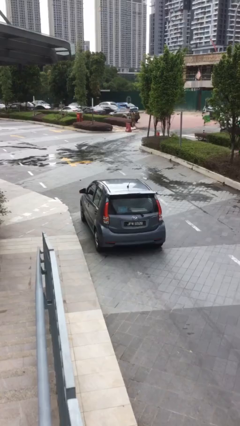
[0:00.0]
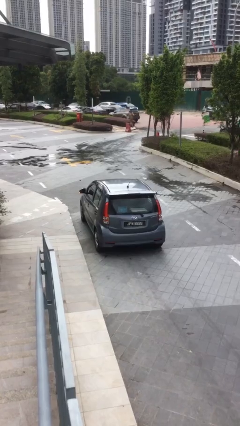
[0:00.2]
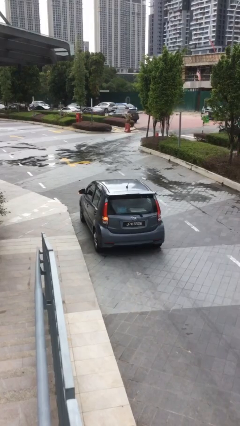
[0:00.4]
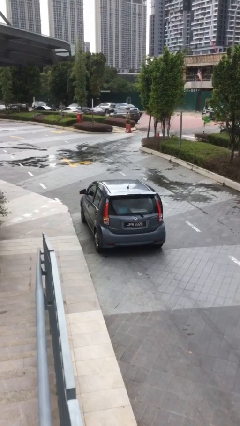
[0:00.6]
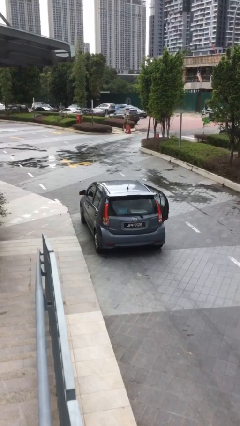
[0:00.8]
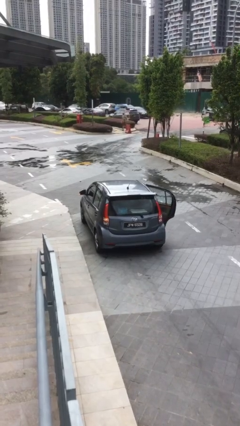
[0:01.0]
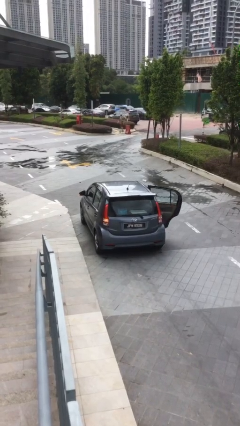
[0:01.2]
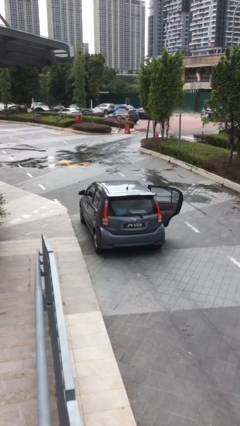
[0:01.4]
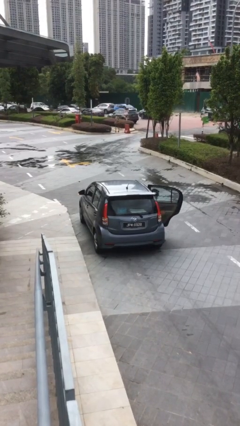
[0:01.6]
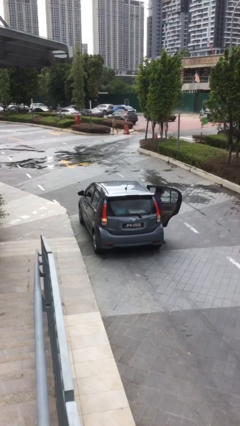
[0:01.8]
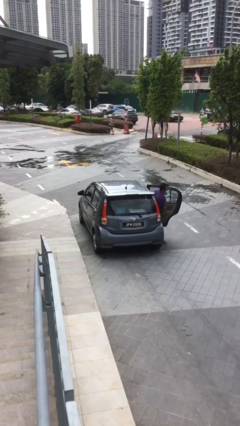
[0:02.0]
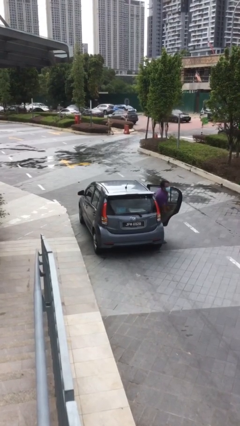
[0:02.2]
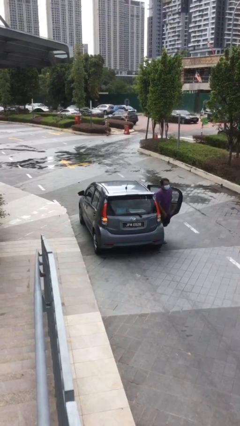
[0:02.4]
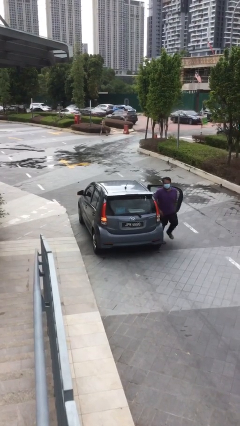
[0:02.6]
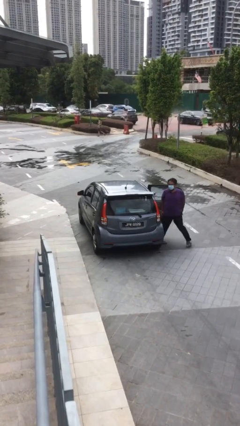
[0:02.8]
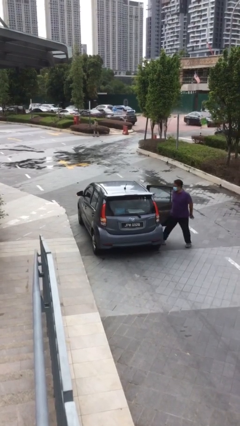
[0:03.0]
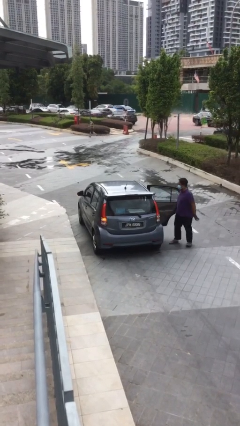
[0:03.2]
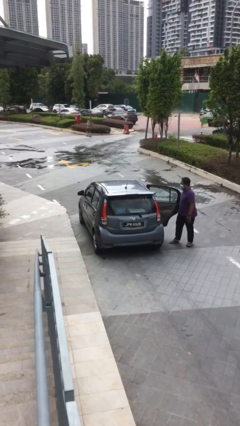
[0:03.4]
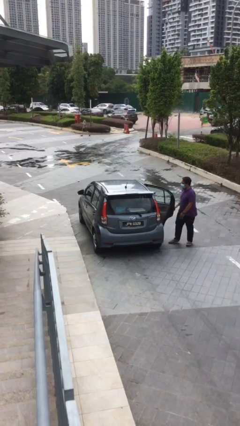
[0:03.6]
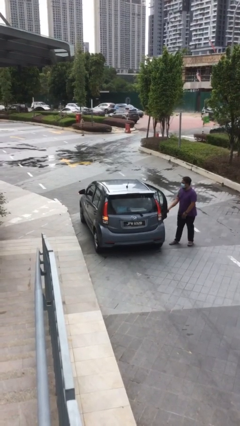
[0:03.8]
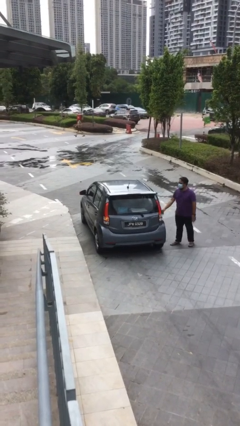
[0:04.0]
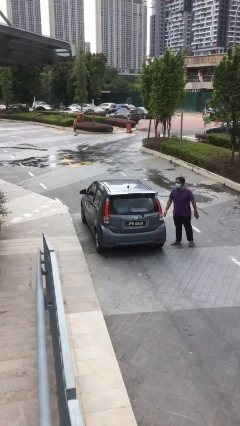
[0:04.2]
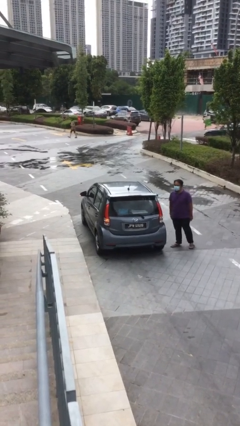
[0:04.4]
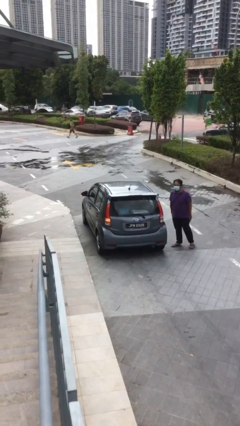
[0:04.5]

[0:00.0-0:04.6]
car drops off person

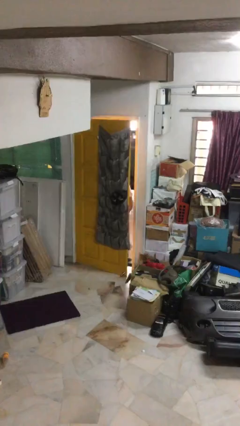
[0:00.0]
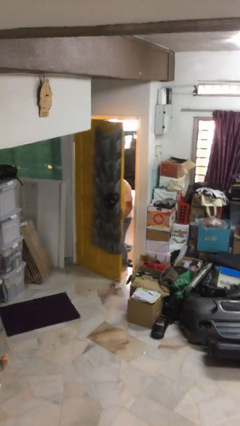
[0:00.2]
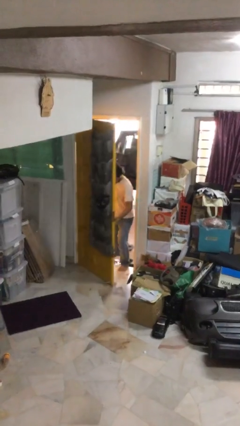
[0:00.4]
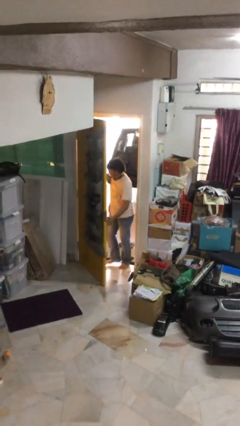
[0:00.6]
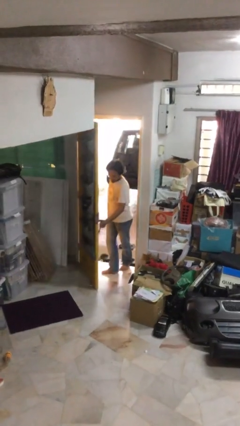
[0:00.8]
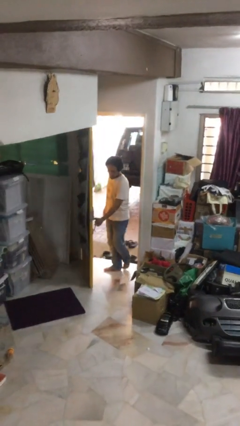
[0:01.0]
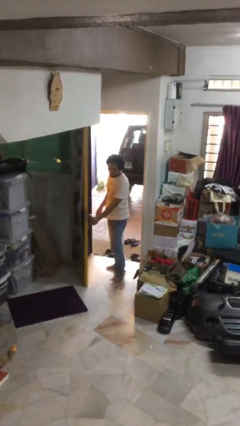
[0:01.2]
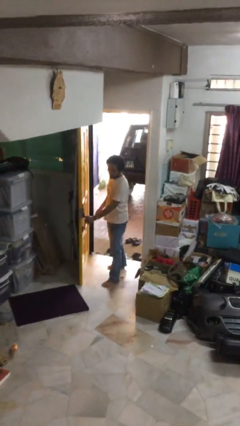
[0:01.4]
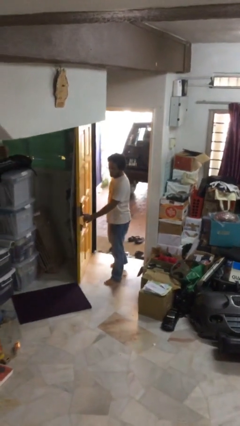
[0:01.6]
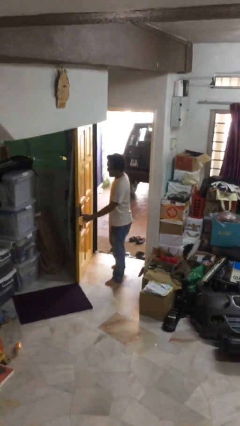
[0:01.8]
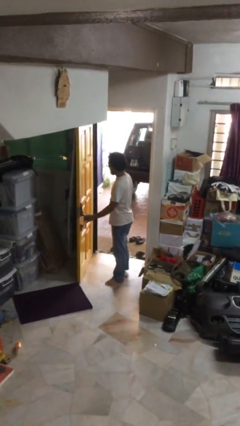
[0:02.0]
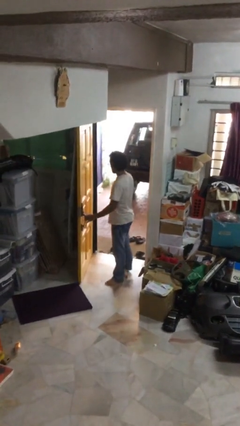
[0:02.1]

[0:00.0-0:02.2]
person opens facility door

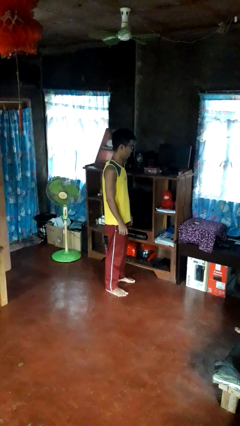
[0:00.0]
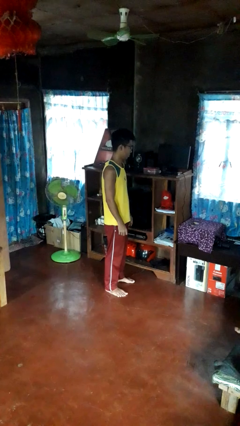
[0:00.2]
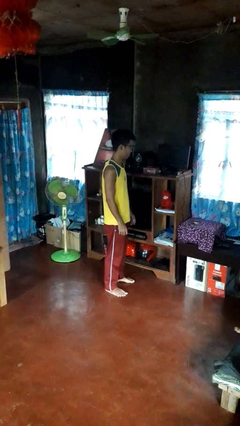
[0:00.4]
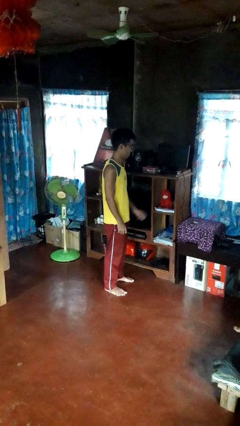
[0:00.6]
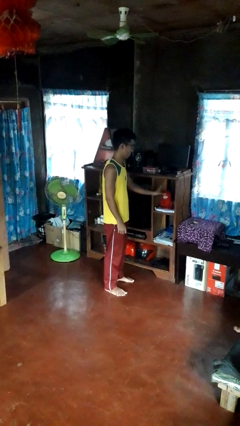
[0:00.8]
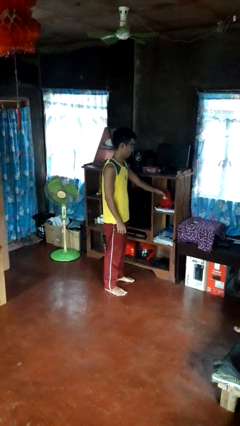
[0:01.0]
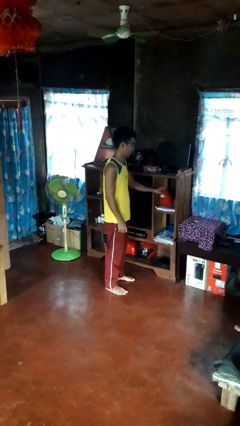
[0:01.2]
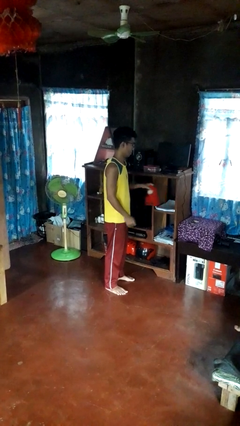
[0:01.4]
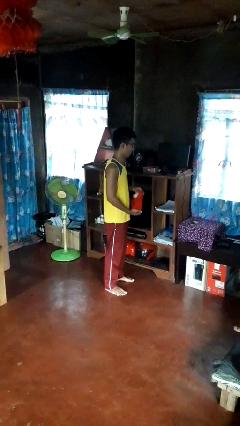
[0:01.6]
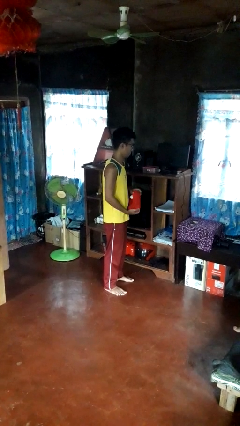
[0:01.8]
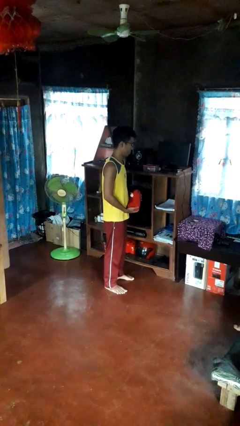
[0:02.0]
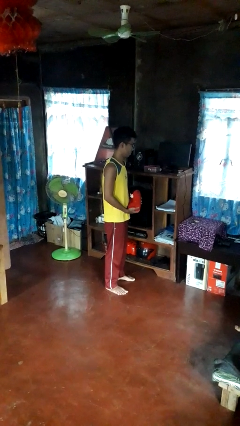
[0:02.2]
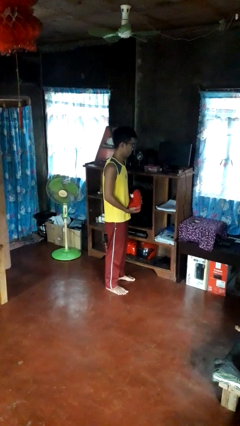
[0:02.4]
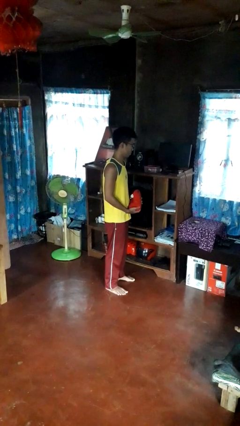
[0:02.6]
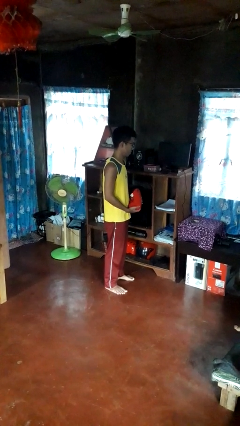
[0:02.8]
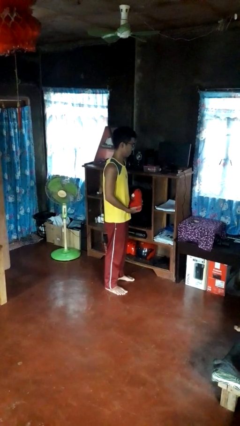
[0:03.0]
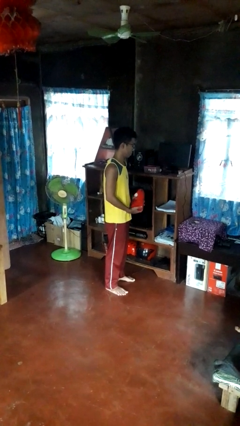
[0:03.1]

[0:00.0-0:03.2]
person picks up object from shelf

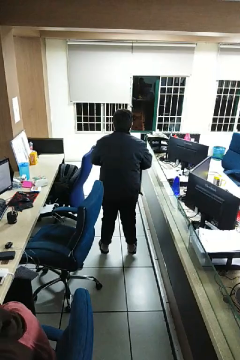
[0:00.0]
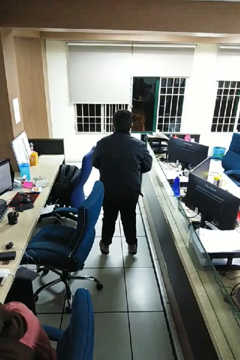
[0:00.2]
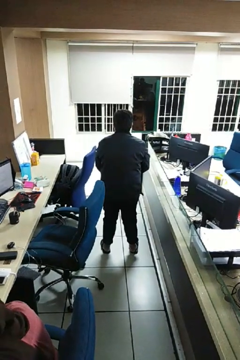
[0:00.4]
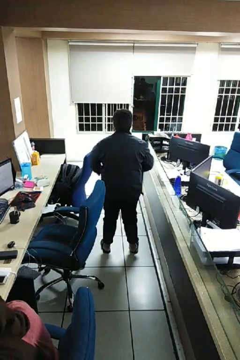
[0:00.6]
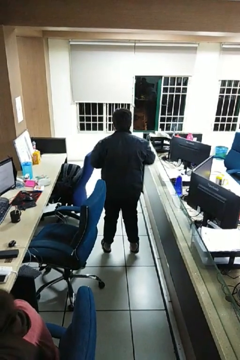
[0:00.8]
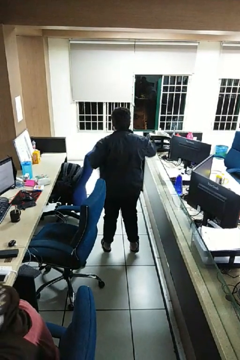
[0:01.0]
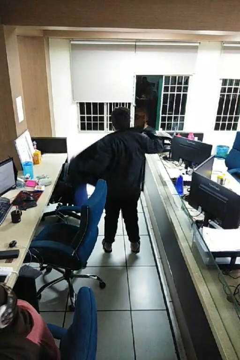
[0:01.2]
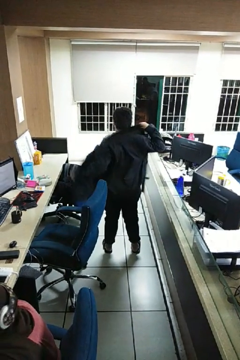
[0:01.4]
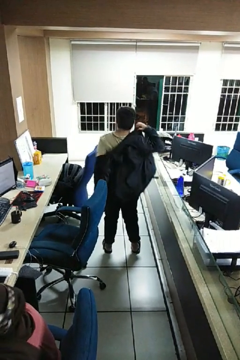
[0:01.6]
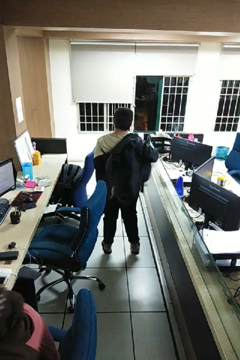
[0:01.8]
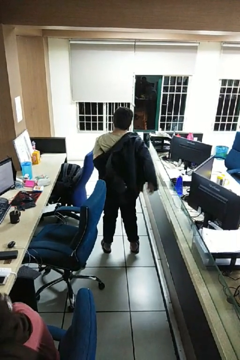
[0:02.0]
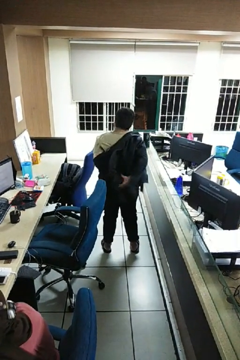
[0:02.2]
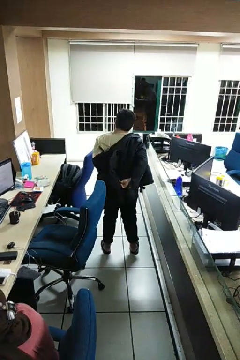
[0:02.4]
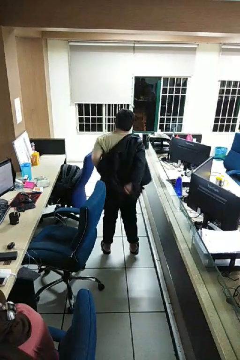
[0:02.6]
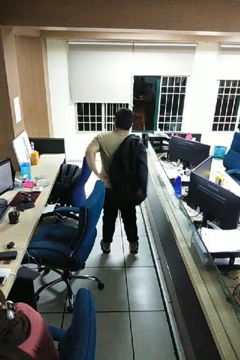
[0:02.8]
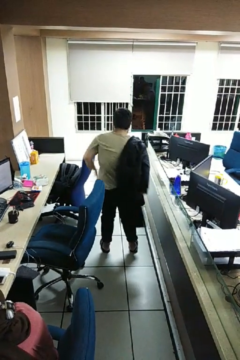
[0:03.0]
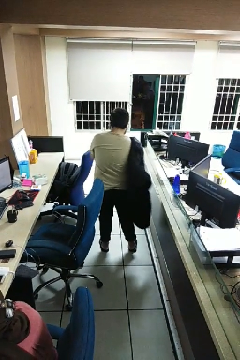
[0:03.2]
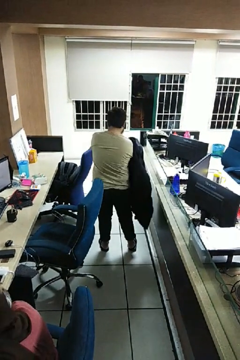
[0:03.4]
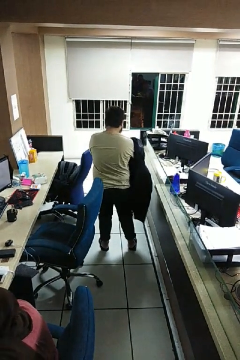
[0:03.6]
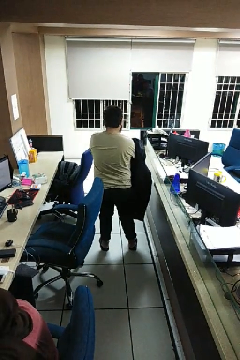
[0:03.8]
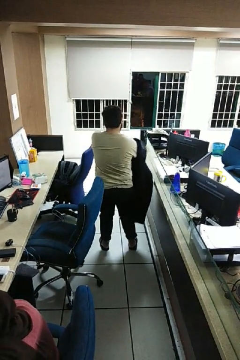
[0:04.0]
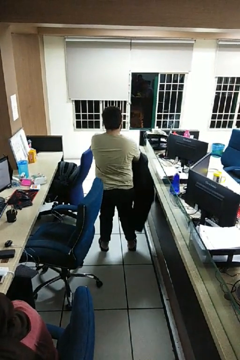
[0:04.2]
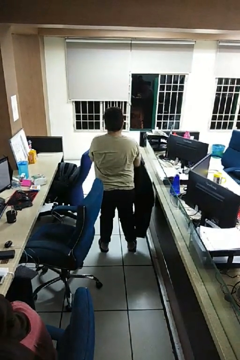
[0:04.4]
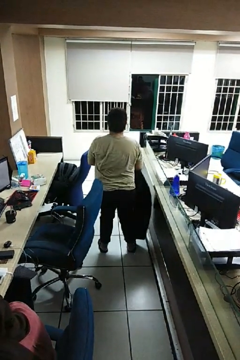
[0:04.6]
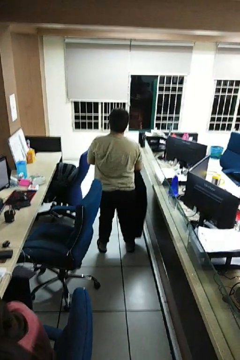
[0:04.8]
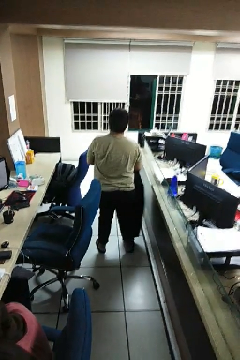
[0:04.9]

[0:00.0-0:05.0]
person takes off shirt

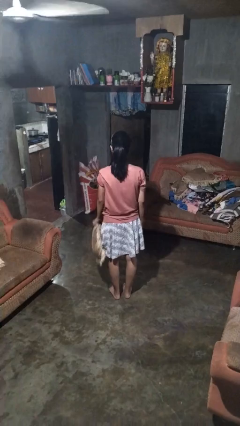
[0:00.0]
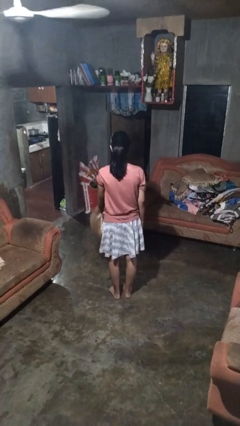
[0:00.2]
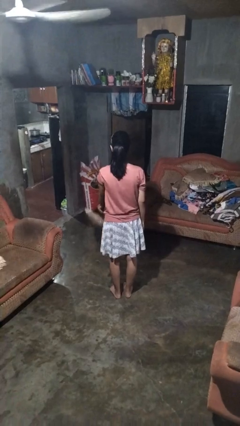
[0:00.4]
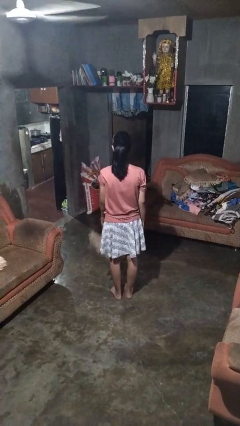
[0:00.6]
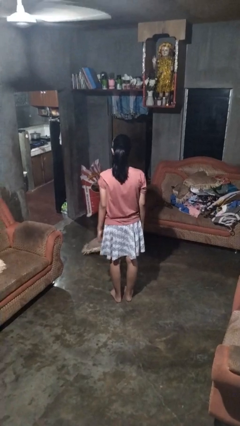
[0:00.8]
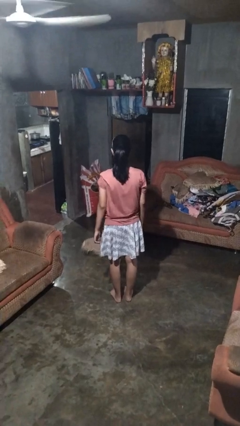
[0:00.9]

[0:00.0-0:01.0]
person throws object to ground

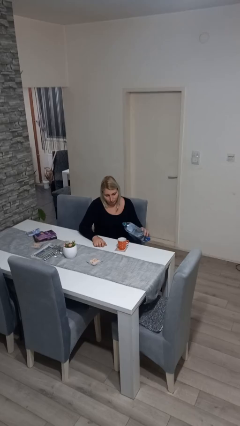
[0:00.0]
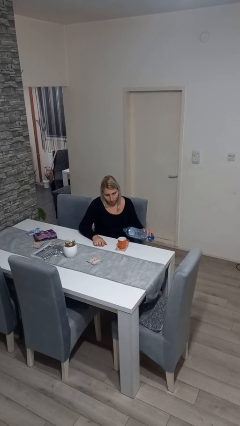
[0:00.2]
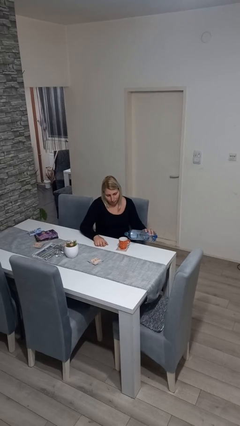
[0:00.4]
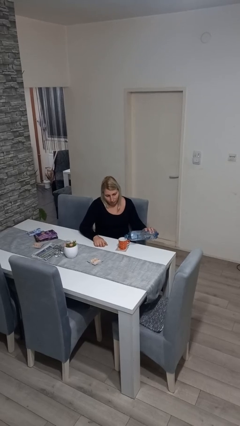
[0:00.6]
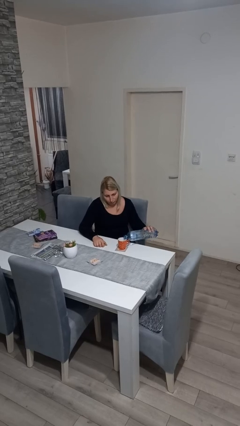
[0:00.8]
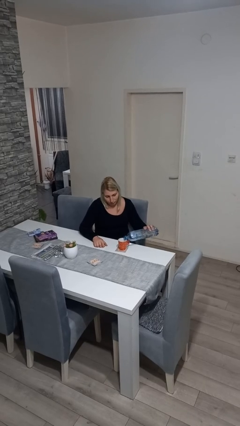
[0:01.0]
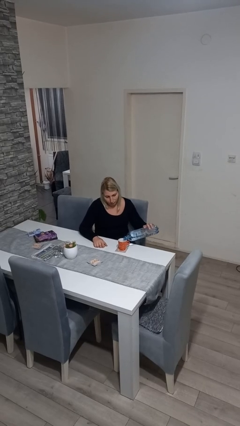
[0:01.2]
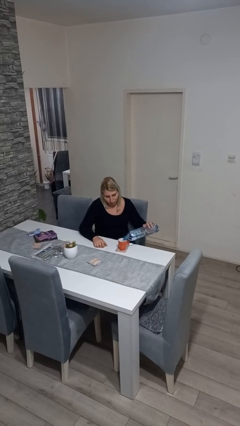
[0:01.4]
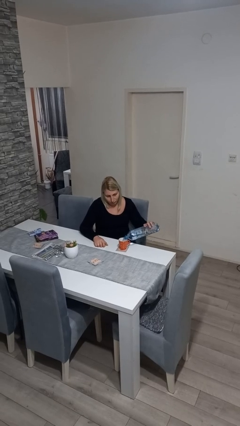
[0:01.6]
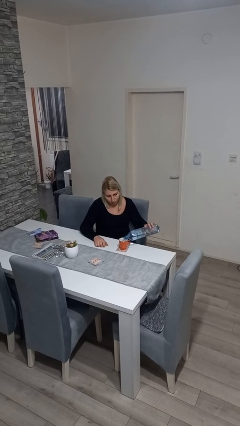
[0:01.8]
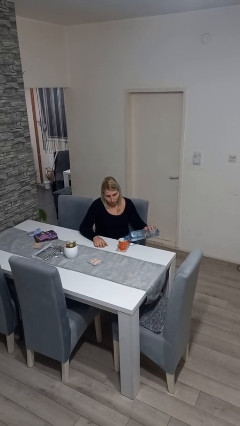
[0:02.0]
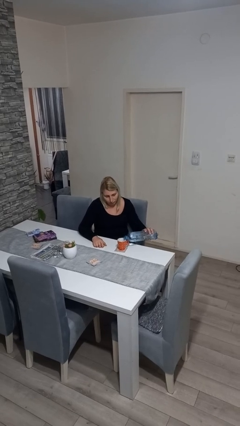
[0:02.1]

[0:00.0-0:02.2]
person pours liquid into cup
